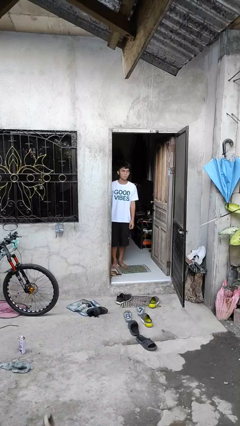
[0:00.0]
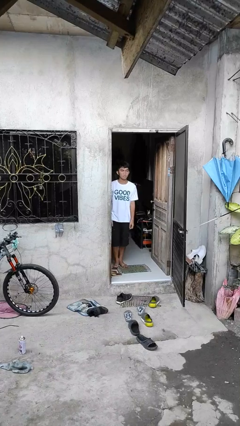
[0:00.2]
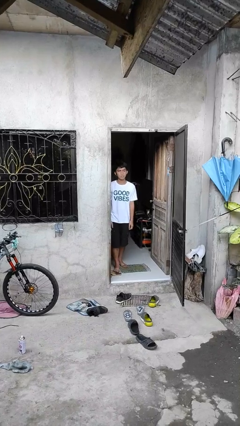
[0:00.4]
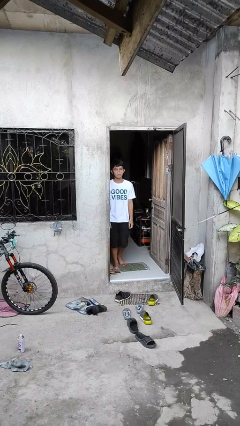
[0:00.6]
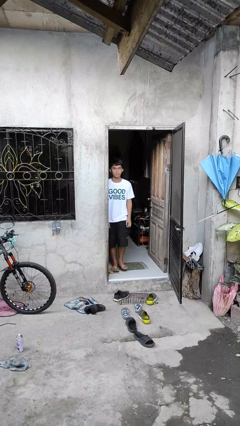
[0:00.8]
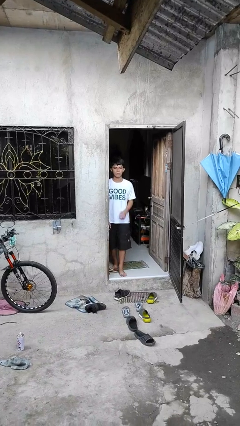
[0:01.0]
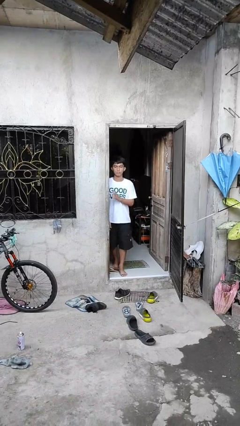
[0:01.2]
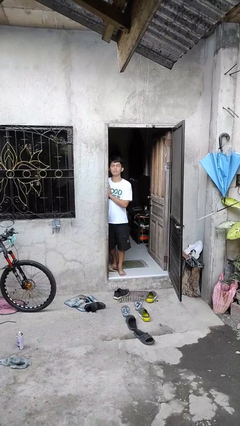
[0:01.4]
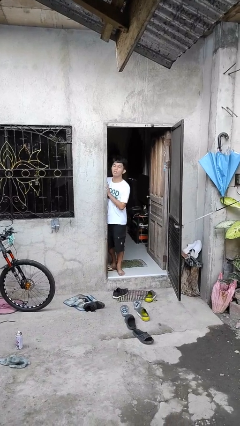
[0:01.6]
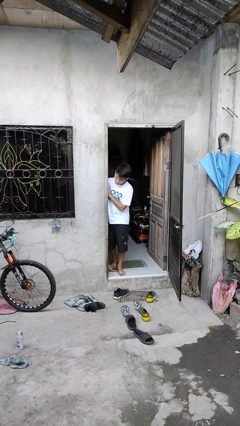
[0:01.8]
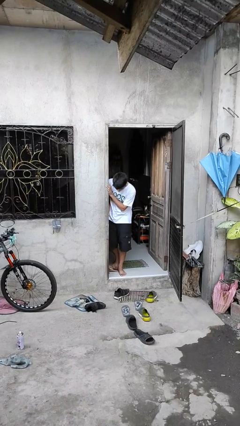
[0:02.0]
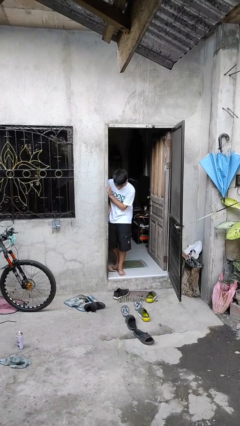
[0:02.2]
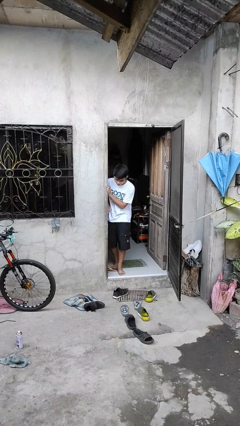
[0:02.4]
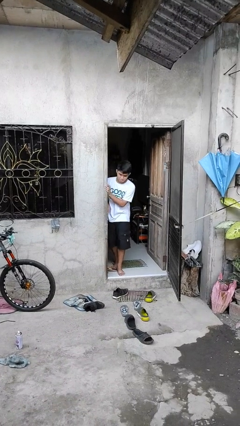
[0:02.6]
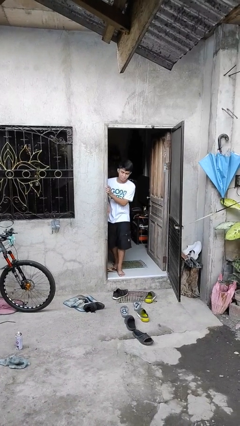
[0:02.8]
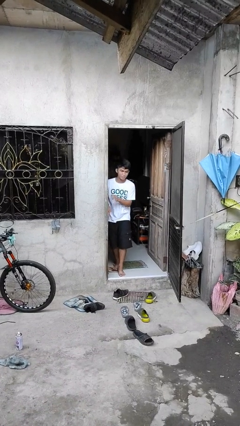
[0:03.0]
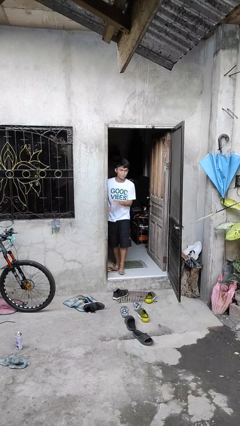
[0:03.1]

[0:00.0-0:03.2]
person bumps into wall

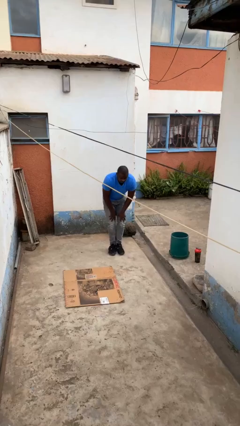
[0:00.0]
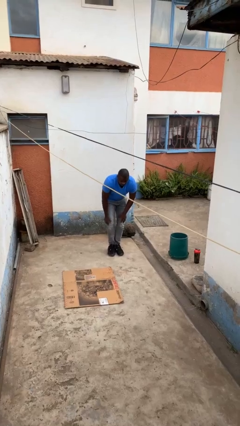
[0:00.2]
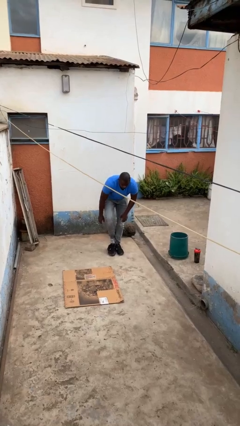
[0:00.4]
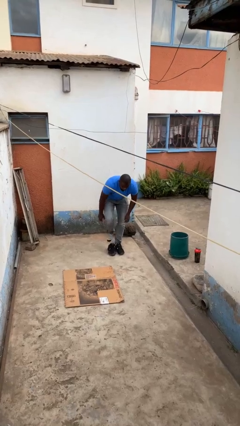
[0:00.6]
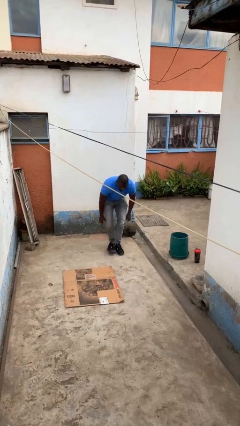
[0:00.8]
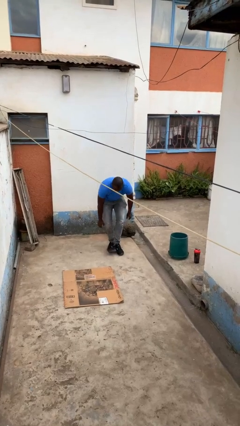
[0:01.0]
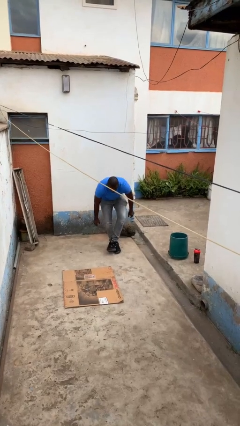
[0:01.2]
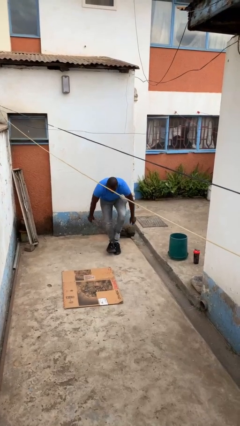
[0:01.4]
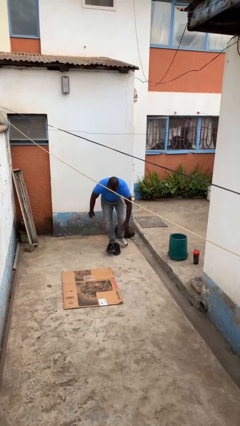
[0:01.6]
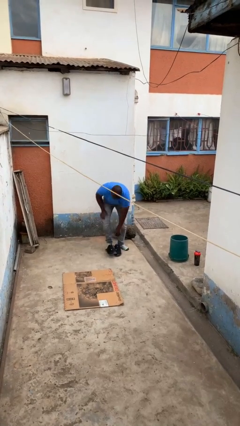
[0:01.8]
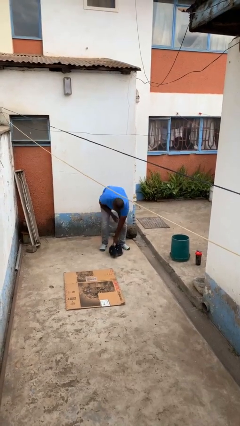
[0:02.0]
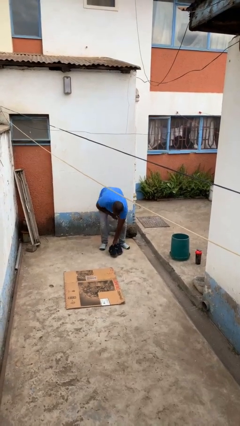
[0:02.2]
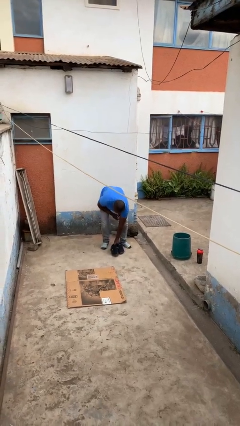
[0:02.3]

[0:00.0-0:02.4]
person takes off shoes

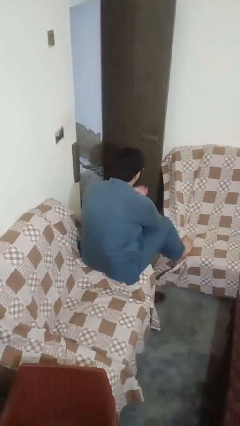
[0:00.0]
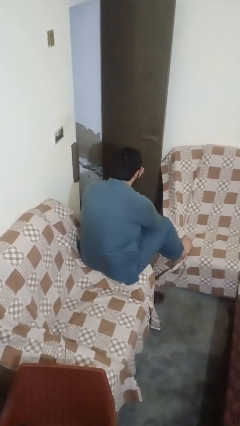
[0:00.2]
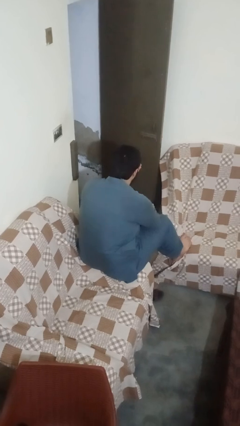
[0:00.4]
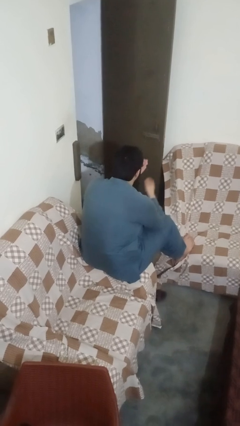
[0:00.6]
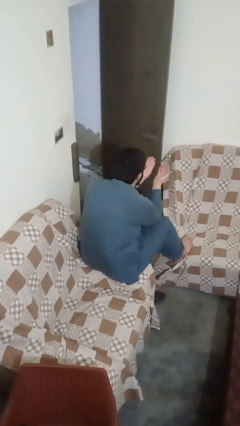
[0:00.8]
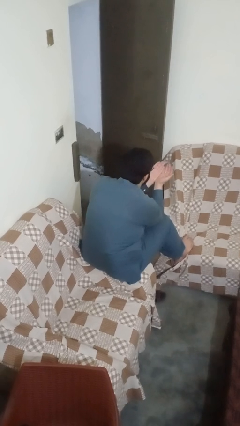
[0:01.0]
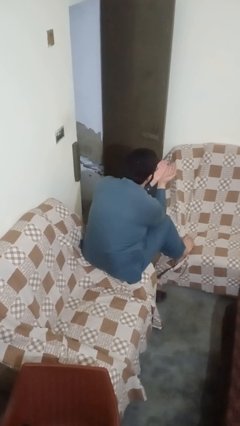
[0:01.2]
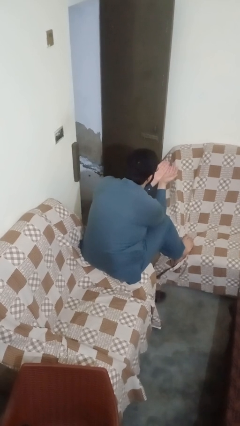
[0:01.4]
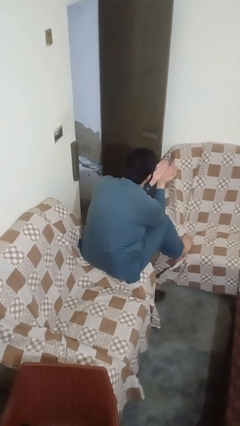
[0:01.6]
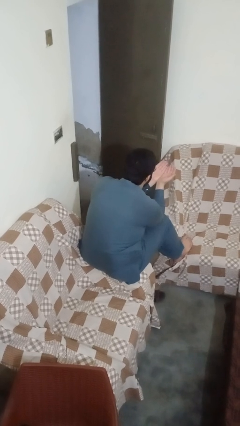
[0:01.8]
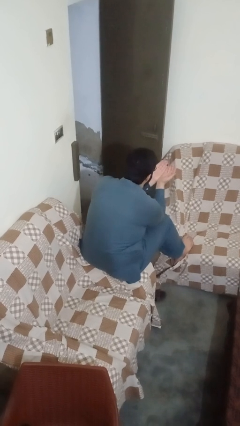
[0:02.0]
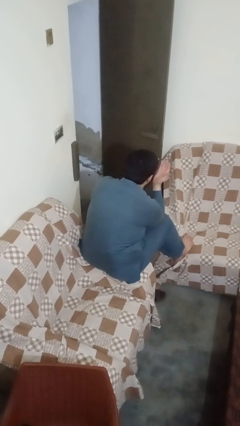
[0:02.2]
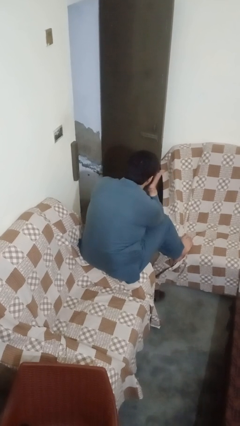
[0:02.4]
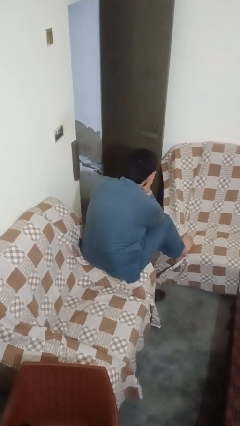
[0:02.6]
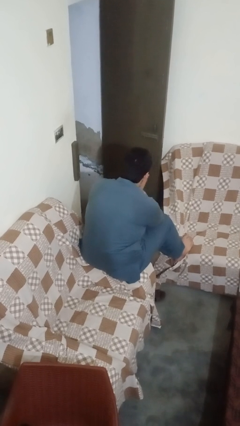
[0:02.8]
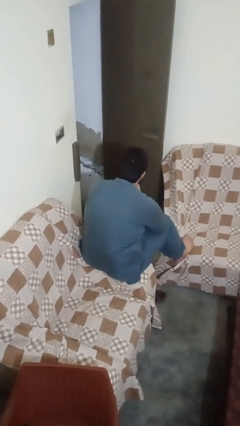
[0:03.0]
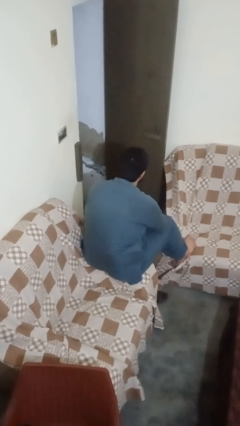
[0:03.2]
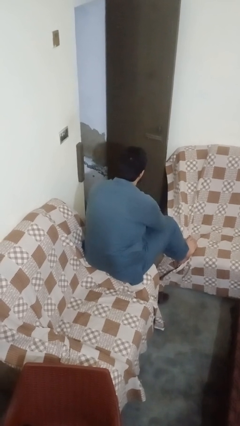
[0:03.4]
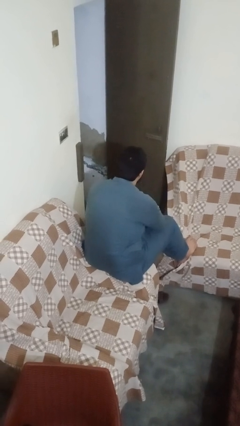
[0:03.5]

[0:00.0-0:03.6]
person prays

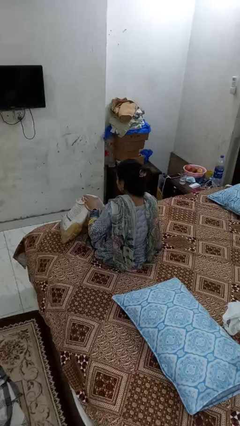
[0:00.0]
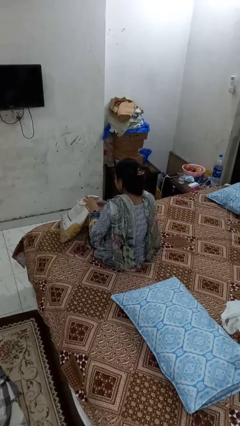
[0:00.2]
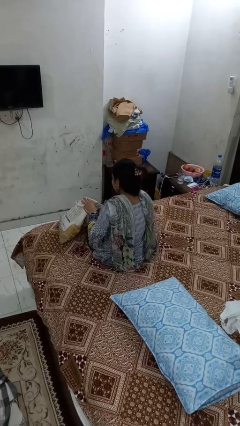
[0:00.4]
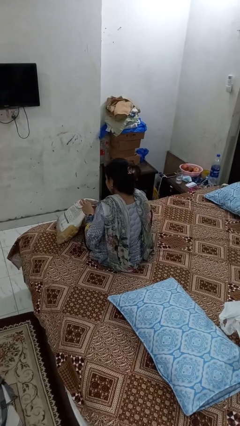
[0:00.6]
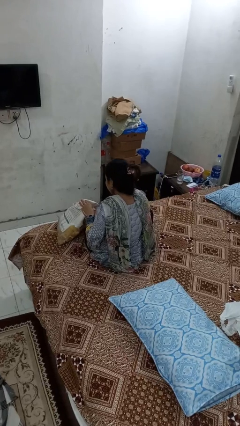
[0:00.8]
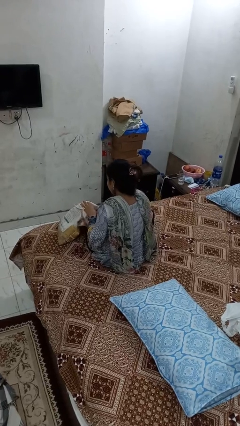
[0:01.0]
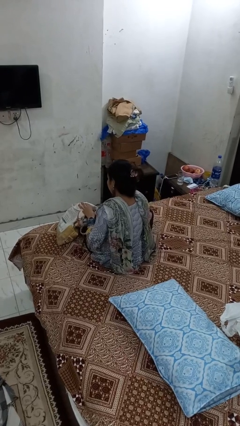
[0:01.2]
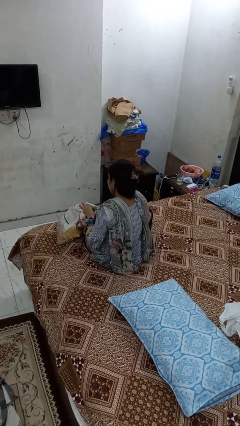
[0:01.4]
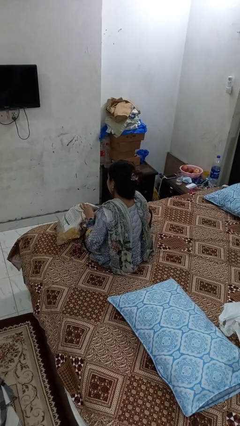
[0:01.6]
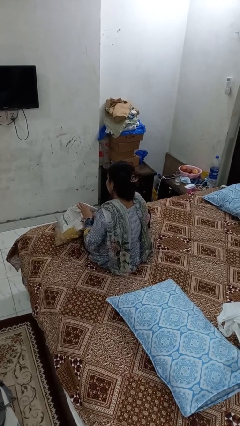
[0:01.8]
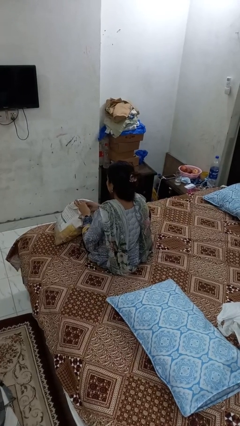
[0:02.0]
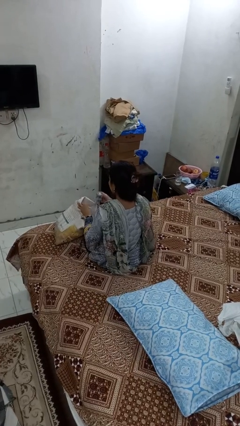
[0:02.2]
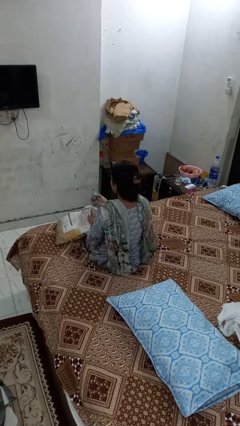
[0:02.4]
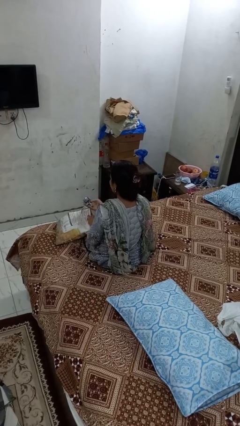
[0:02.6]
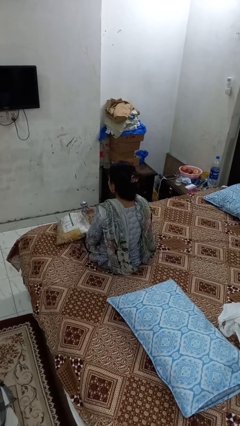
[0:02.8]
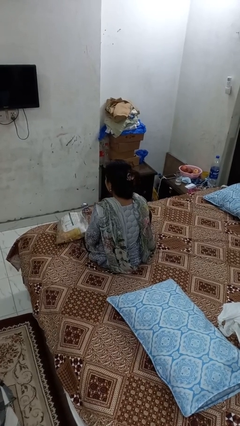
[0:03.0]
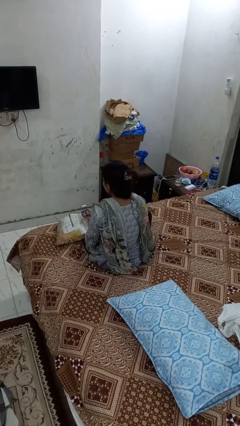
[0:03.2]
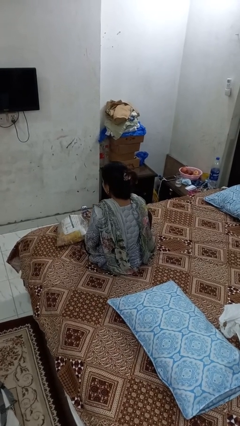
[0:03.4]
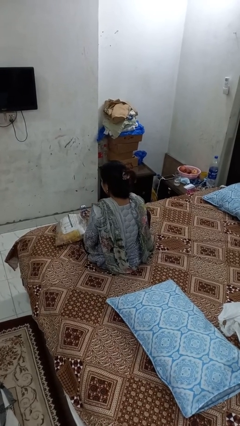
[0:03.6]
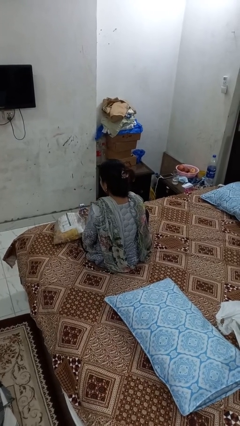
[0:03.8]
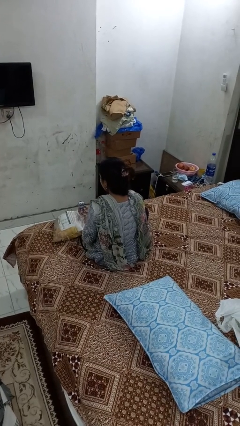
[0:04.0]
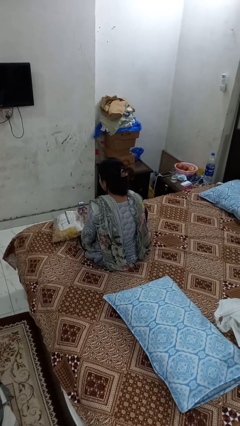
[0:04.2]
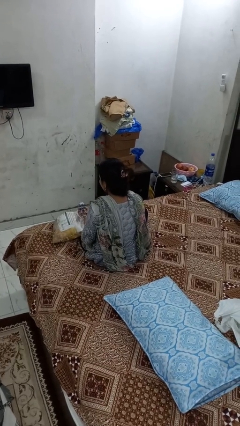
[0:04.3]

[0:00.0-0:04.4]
person takes object from bag

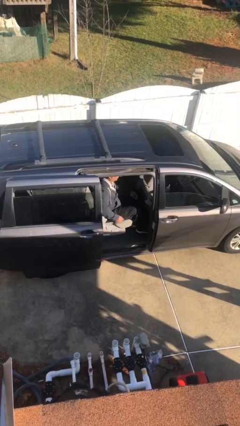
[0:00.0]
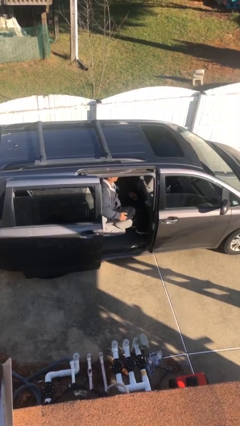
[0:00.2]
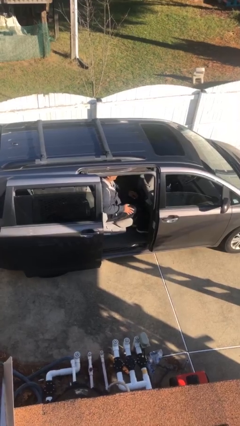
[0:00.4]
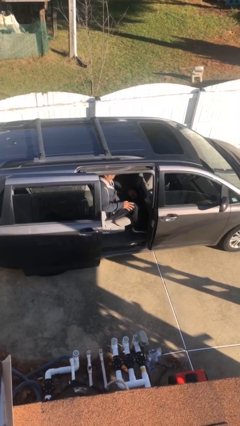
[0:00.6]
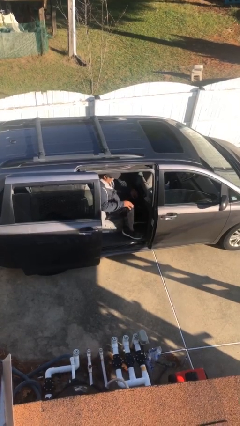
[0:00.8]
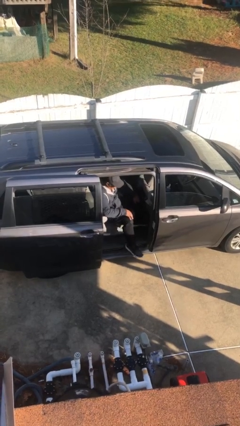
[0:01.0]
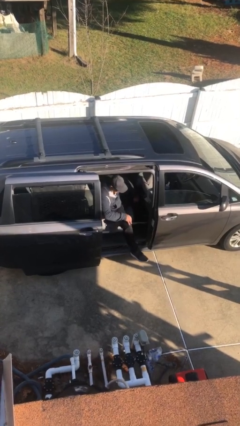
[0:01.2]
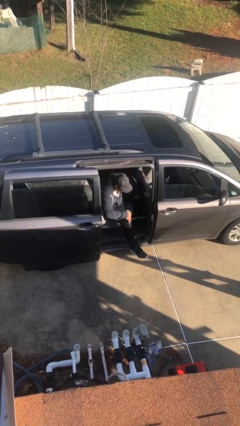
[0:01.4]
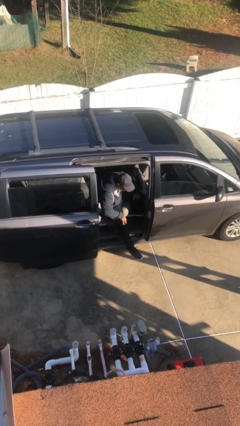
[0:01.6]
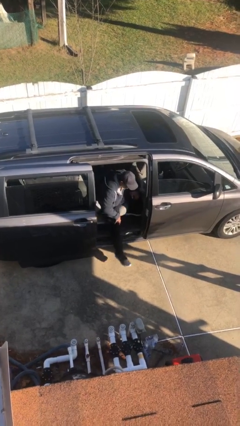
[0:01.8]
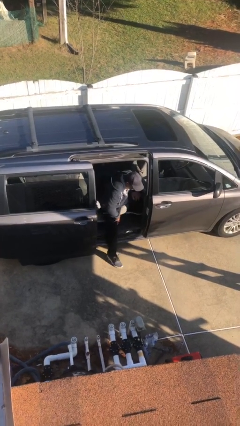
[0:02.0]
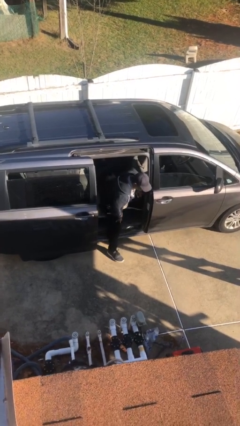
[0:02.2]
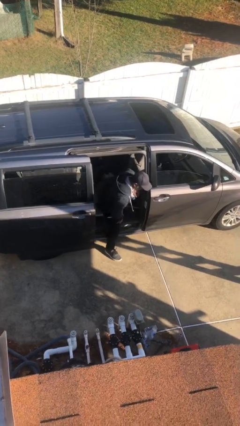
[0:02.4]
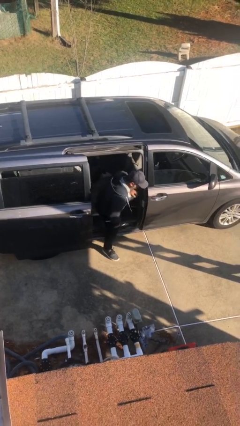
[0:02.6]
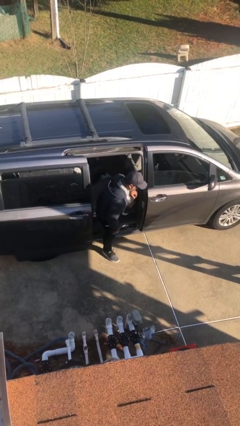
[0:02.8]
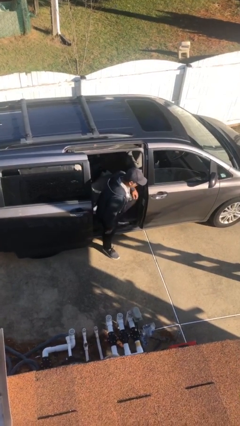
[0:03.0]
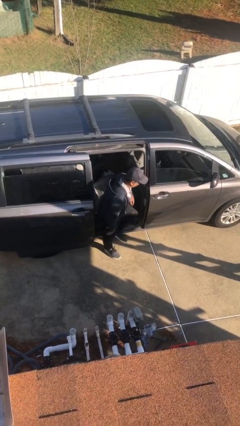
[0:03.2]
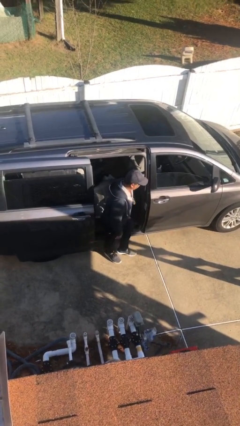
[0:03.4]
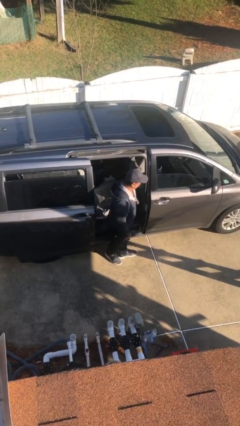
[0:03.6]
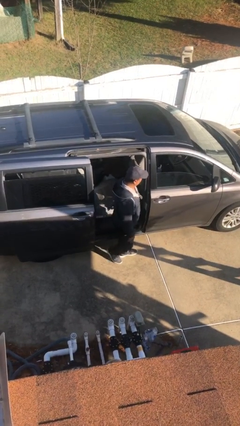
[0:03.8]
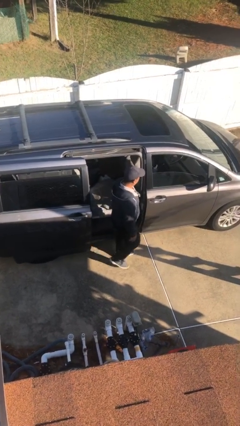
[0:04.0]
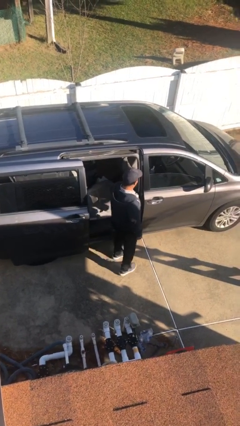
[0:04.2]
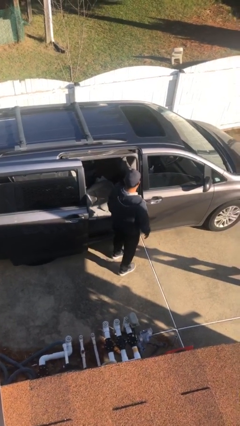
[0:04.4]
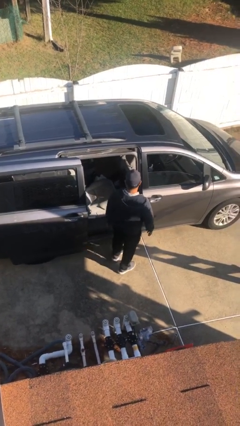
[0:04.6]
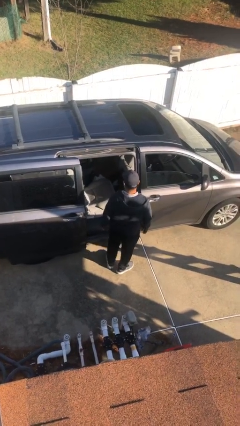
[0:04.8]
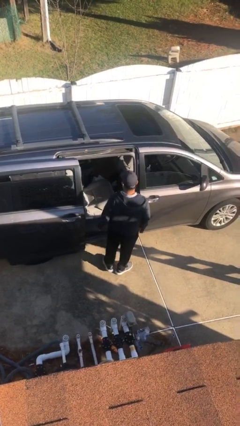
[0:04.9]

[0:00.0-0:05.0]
person exits car
